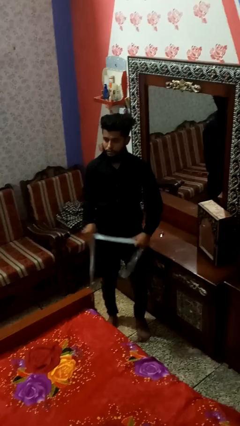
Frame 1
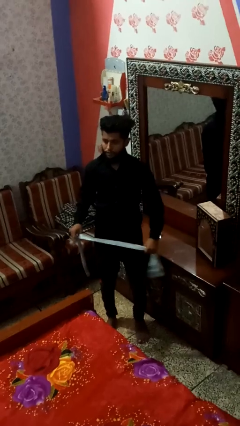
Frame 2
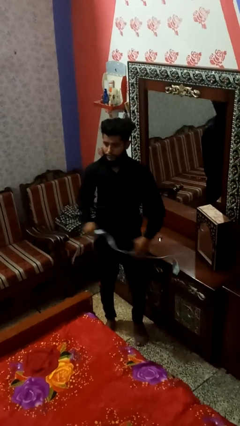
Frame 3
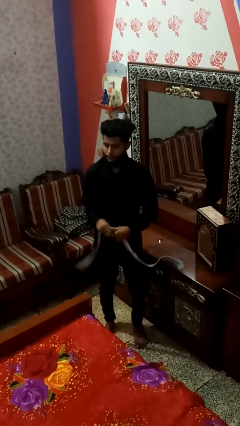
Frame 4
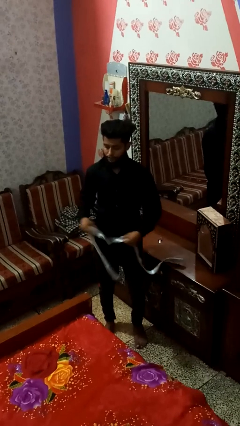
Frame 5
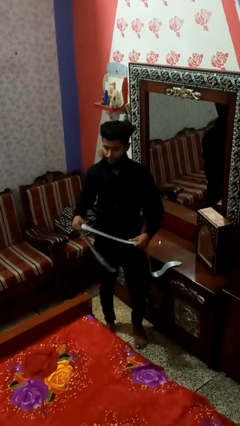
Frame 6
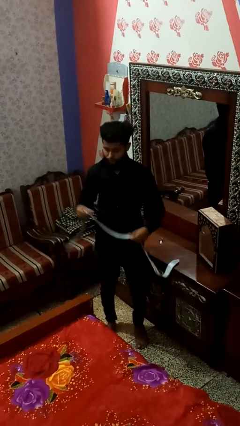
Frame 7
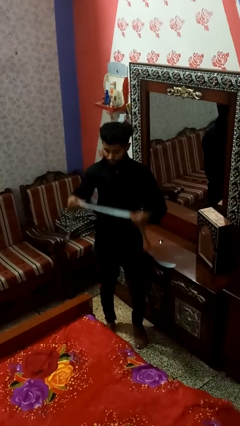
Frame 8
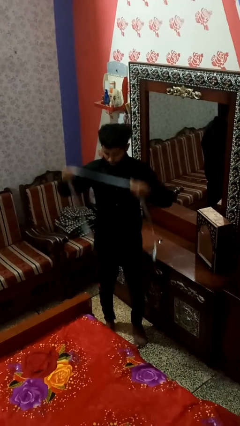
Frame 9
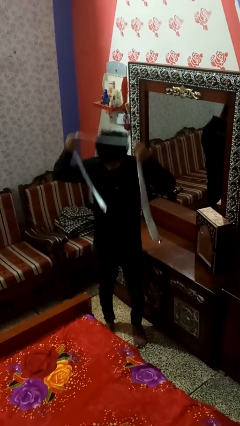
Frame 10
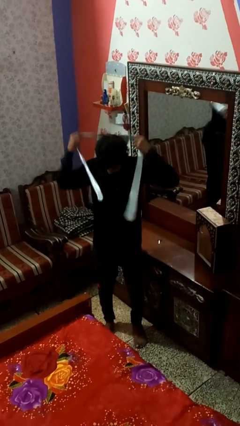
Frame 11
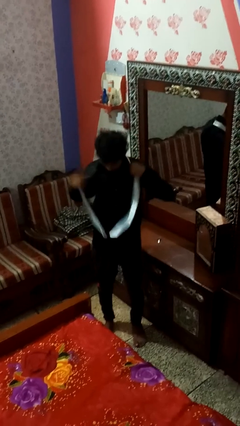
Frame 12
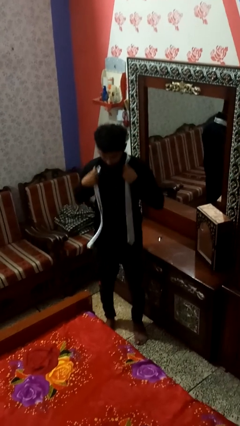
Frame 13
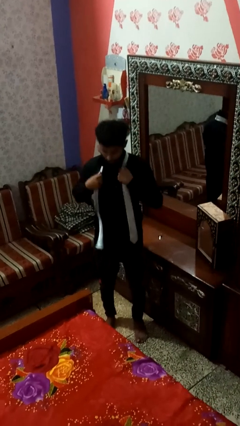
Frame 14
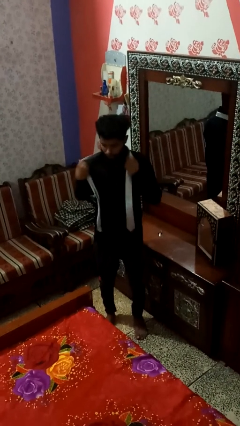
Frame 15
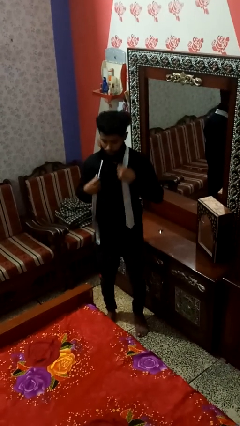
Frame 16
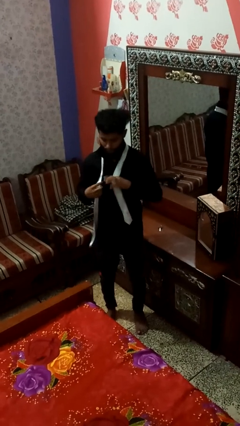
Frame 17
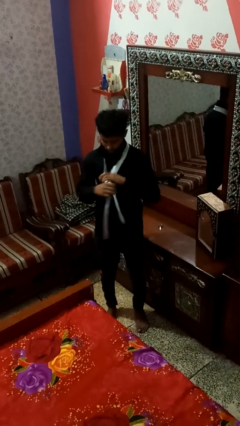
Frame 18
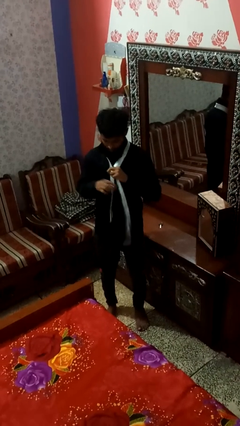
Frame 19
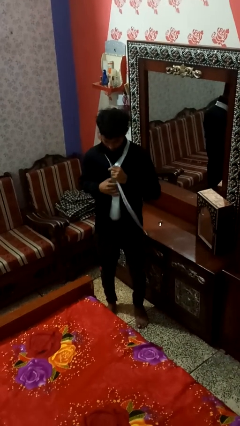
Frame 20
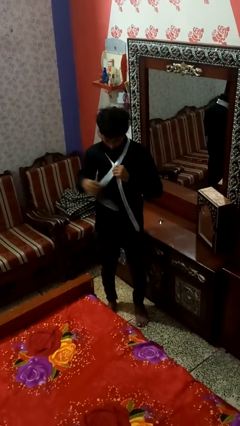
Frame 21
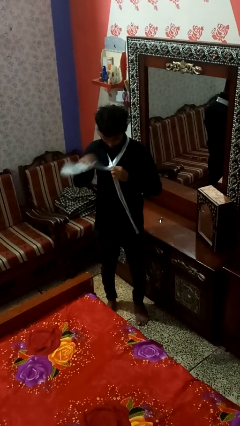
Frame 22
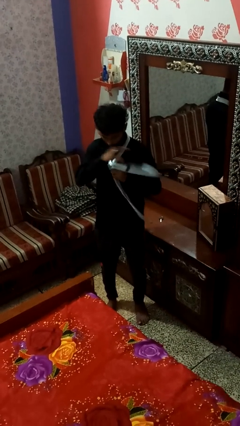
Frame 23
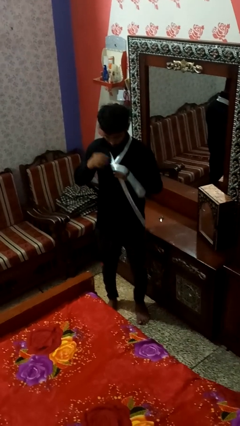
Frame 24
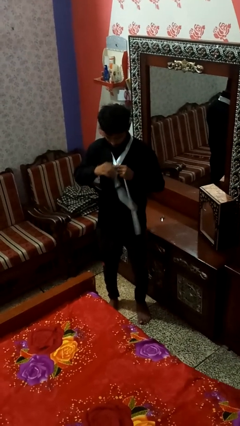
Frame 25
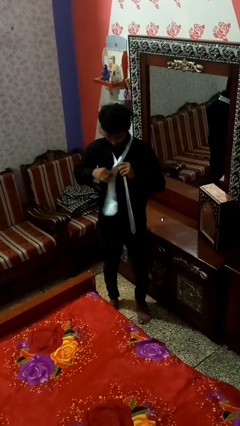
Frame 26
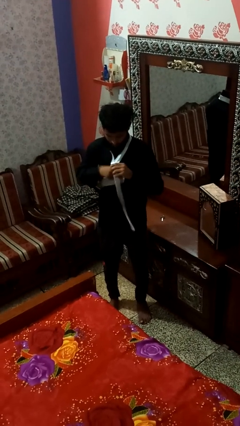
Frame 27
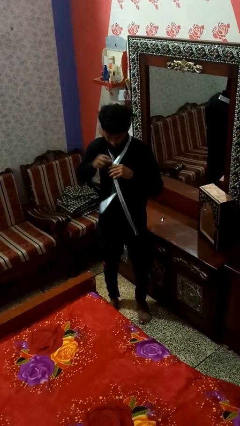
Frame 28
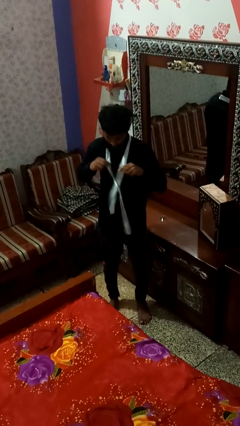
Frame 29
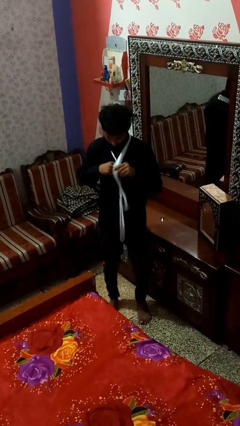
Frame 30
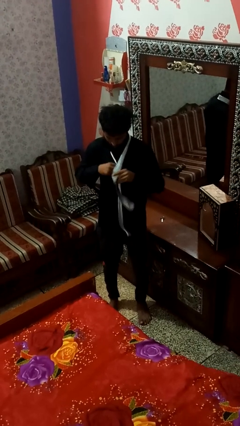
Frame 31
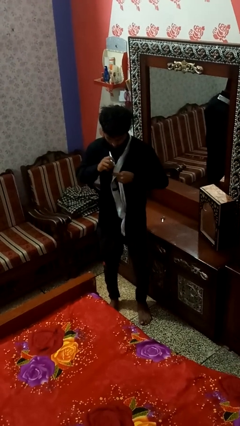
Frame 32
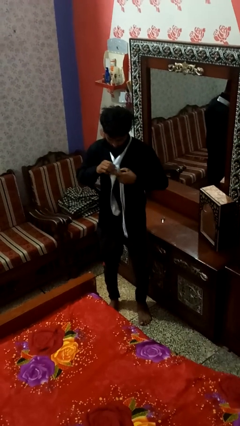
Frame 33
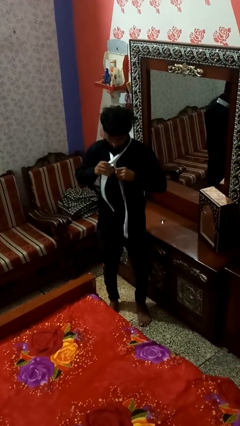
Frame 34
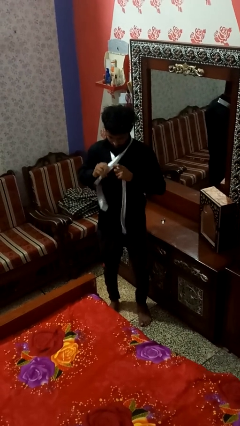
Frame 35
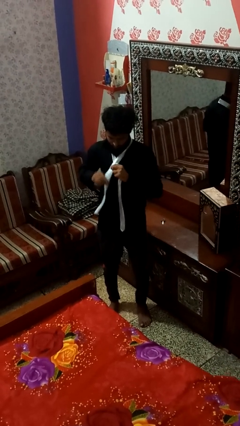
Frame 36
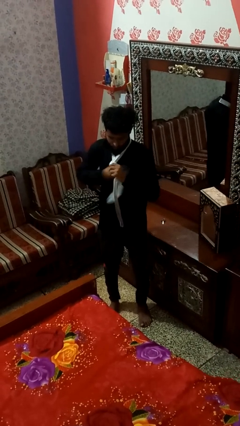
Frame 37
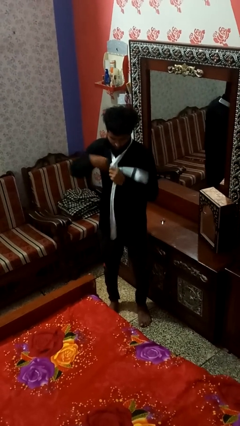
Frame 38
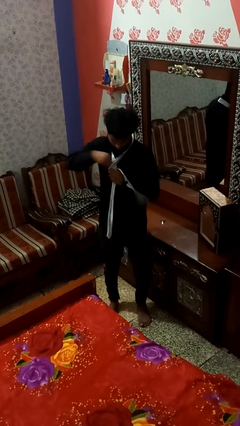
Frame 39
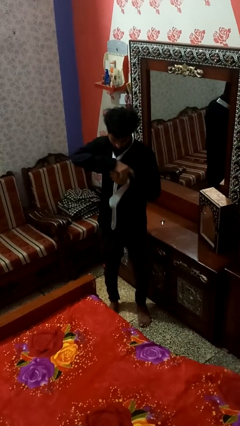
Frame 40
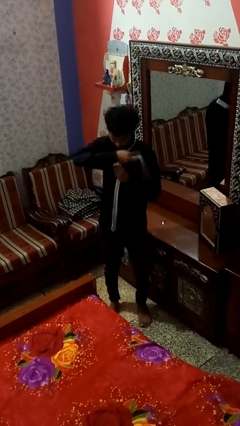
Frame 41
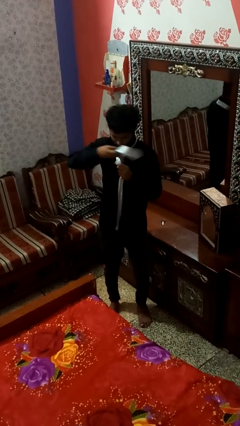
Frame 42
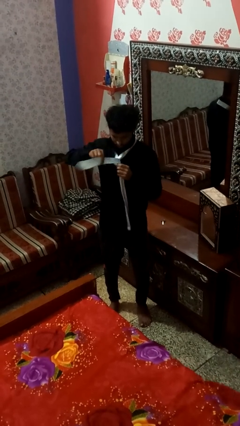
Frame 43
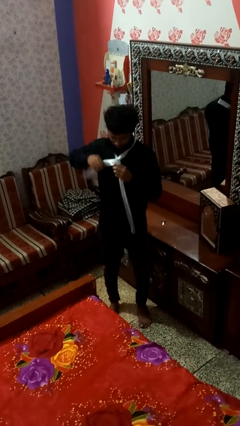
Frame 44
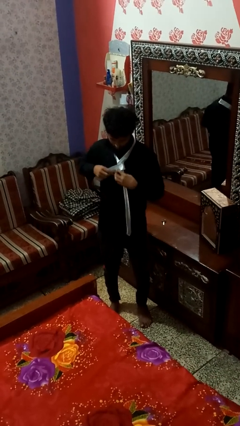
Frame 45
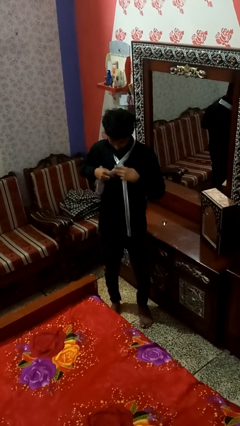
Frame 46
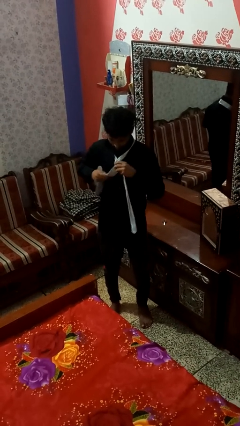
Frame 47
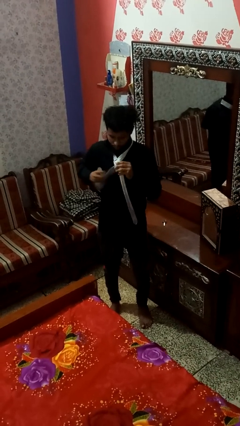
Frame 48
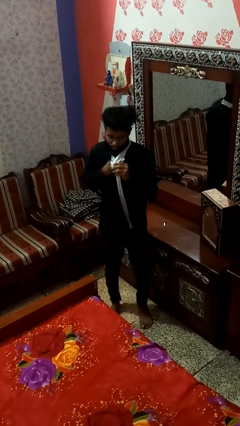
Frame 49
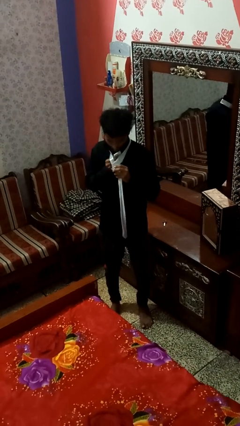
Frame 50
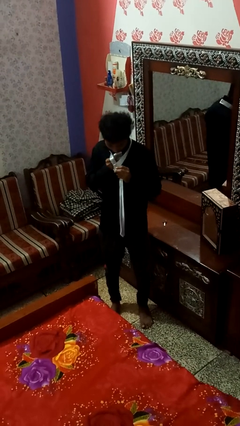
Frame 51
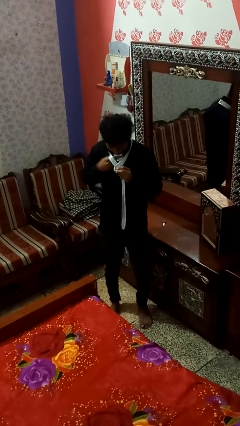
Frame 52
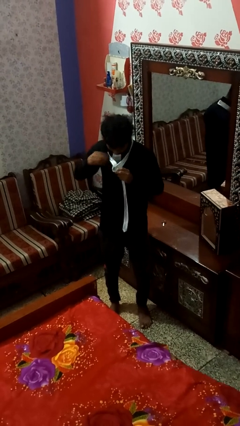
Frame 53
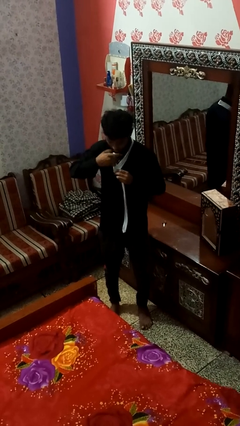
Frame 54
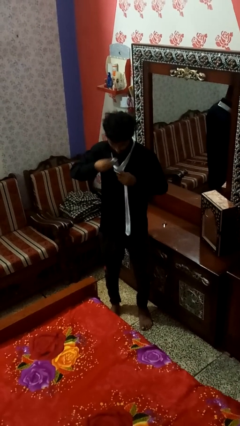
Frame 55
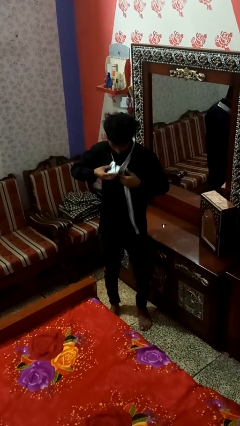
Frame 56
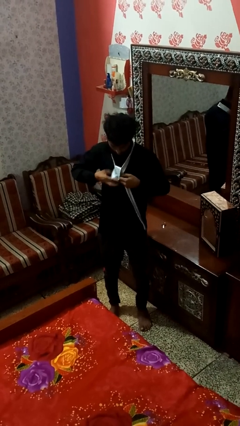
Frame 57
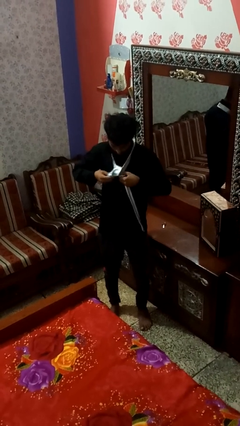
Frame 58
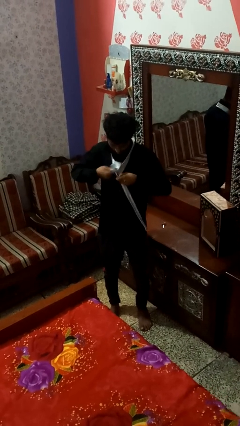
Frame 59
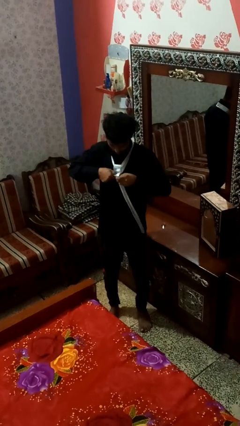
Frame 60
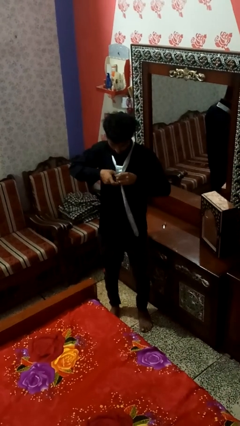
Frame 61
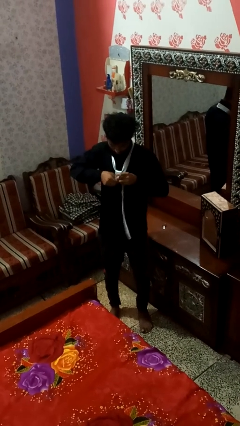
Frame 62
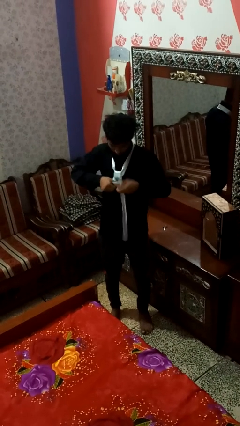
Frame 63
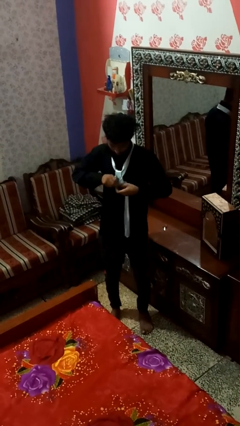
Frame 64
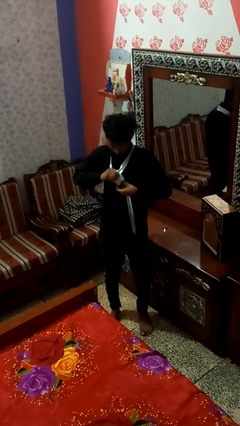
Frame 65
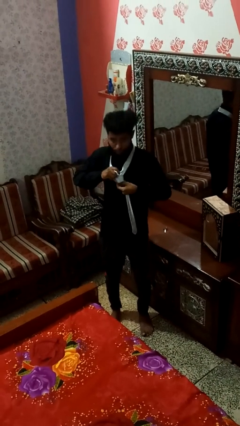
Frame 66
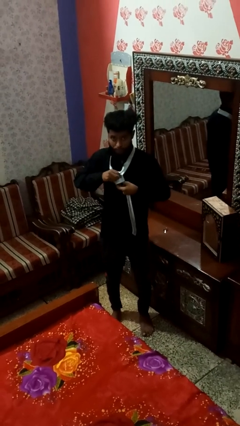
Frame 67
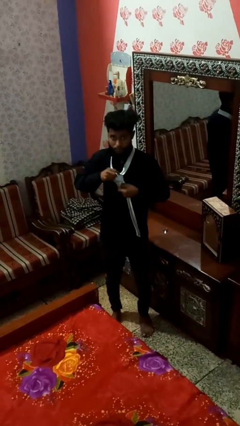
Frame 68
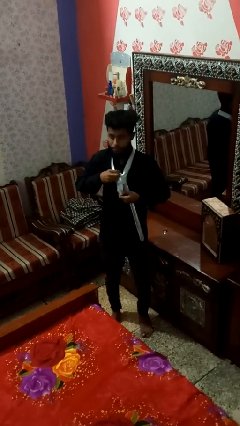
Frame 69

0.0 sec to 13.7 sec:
person puts on necktie

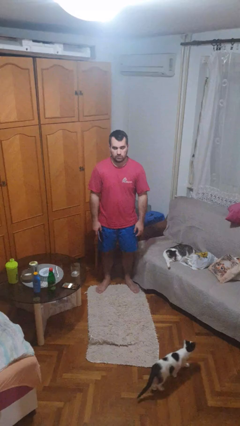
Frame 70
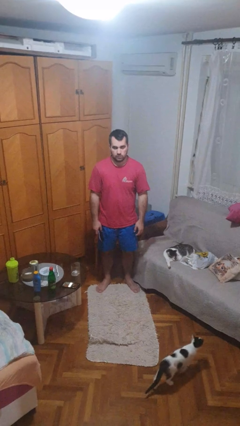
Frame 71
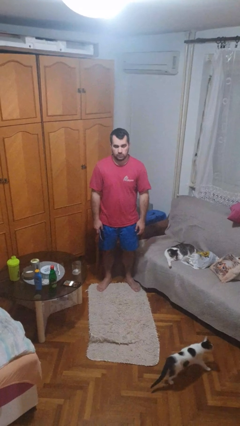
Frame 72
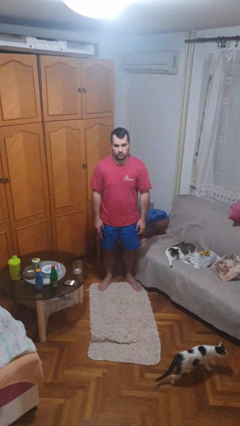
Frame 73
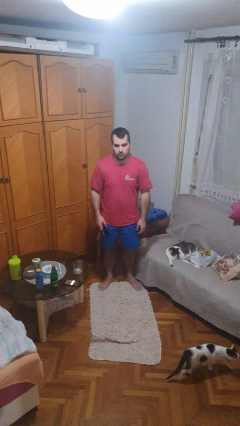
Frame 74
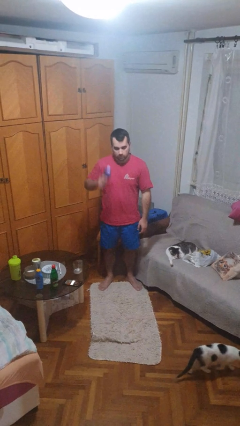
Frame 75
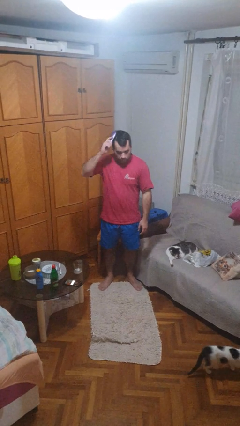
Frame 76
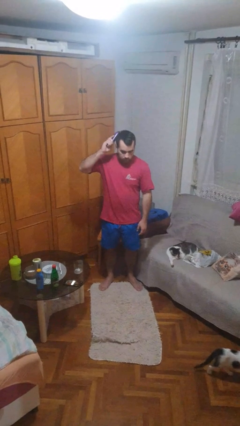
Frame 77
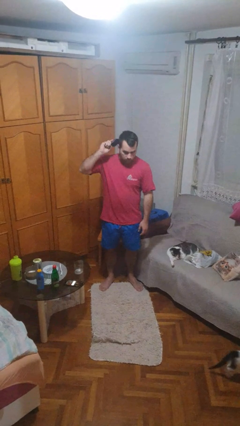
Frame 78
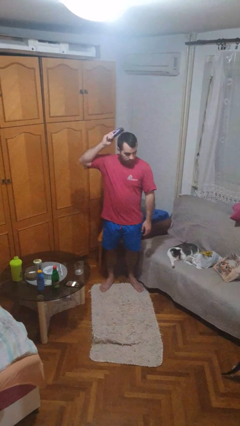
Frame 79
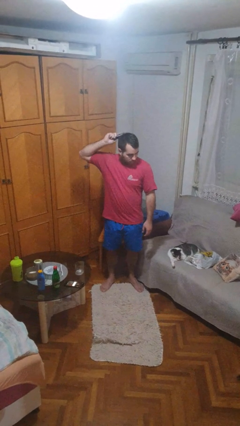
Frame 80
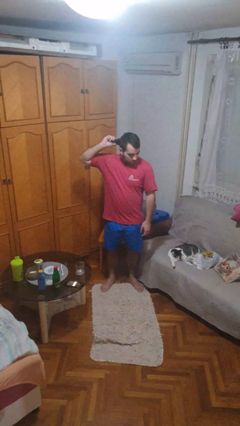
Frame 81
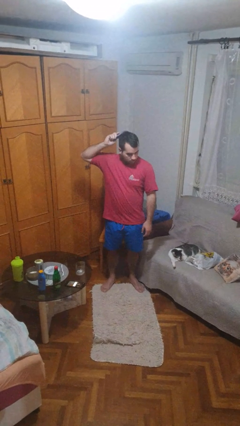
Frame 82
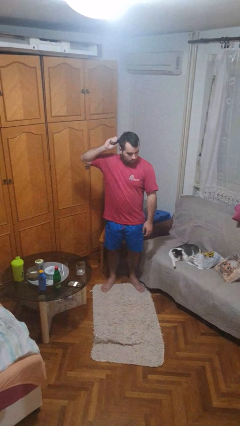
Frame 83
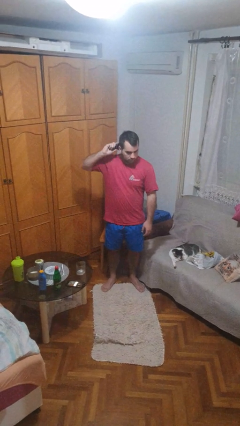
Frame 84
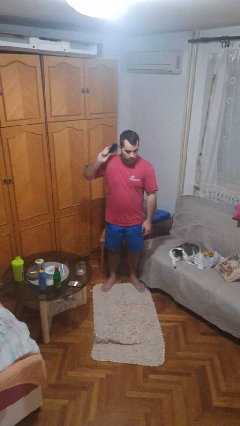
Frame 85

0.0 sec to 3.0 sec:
person brushes hair

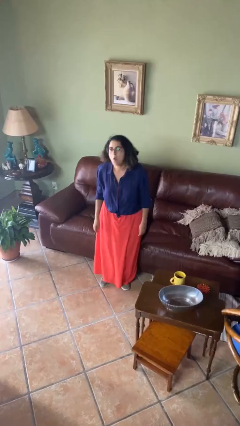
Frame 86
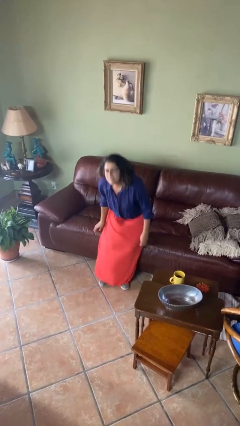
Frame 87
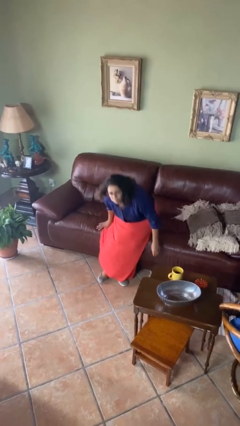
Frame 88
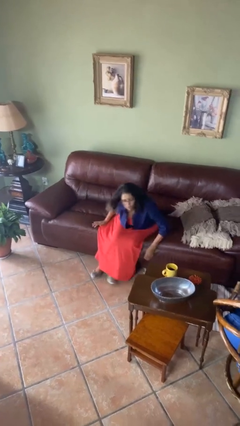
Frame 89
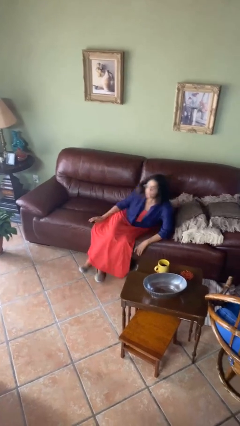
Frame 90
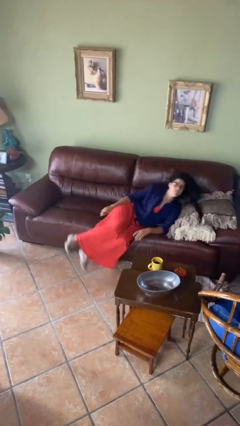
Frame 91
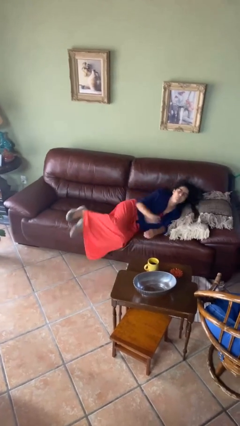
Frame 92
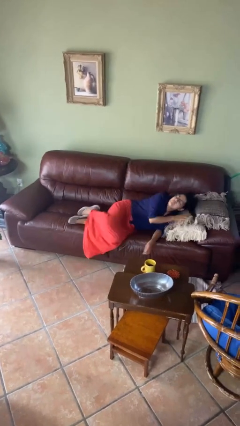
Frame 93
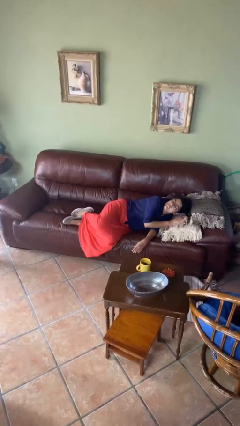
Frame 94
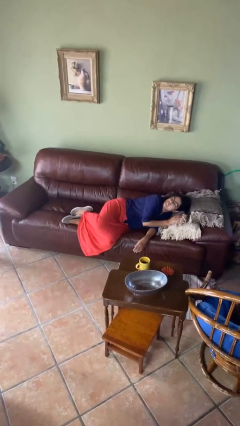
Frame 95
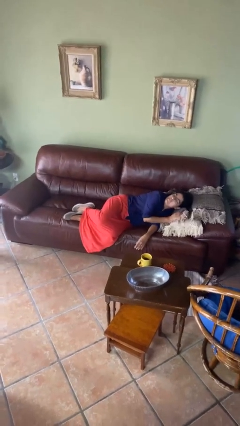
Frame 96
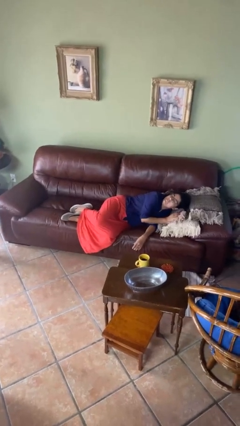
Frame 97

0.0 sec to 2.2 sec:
person lies down on couch
